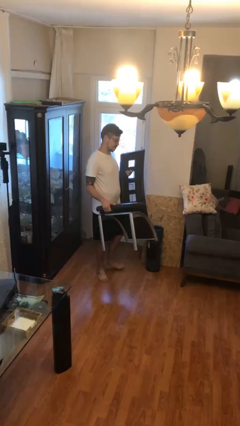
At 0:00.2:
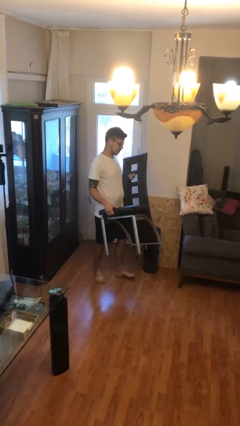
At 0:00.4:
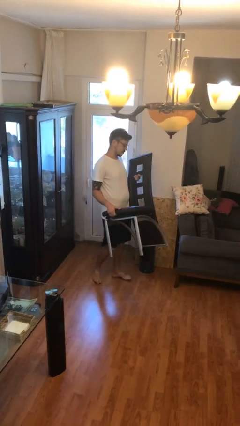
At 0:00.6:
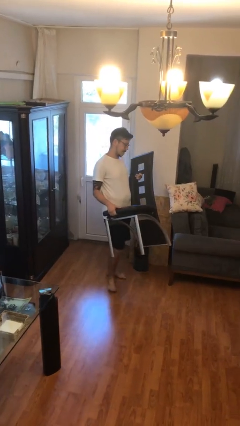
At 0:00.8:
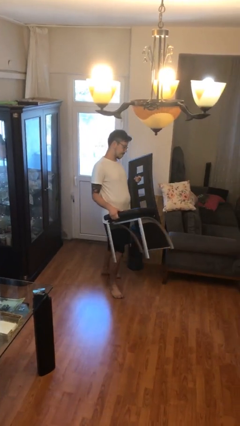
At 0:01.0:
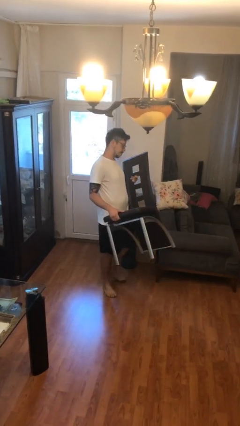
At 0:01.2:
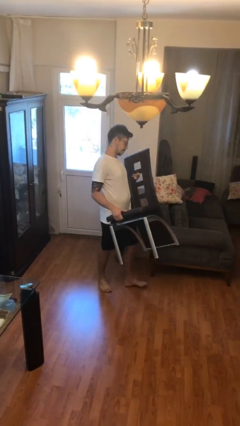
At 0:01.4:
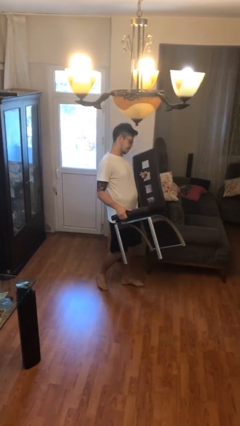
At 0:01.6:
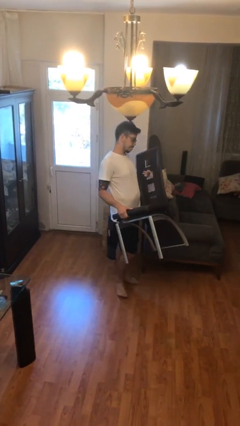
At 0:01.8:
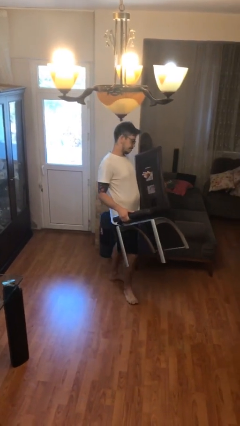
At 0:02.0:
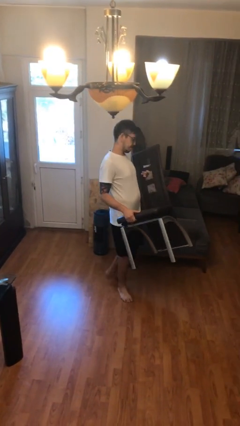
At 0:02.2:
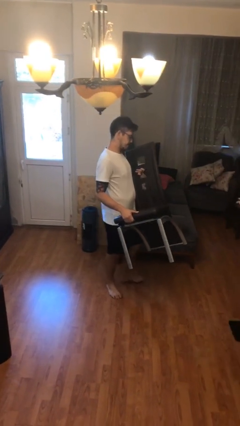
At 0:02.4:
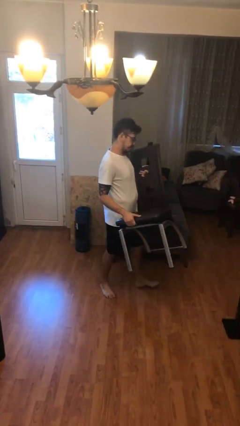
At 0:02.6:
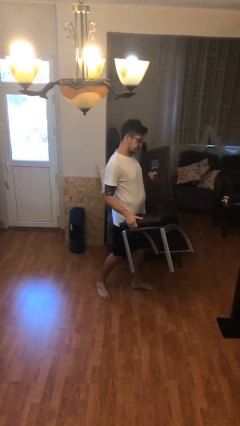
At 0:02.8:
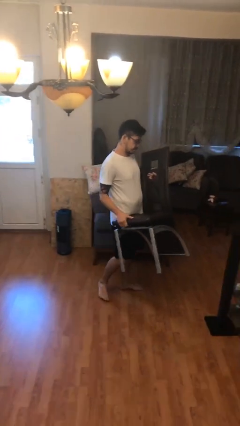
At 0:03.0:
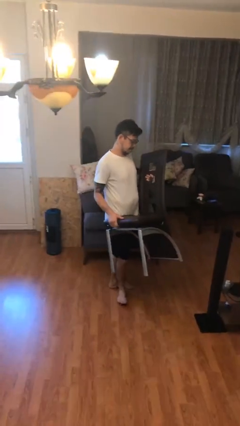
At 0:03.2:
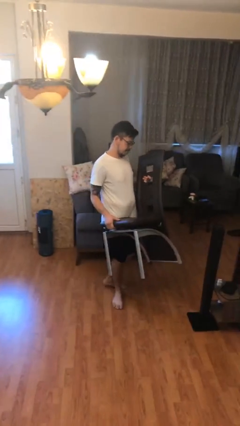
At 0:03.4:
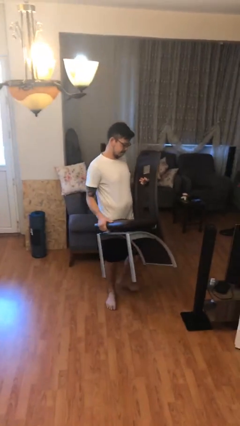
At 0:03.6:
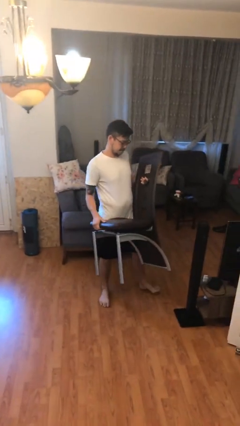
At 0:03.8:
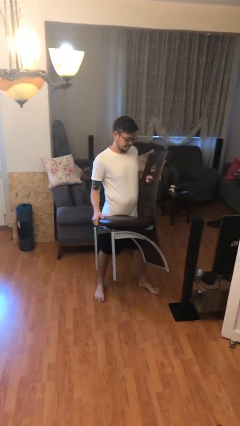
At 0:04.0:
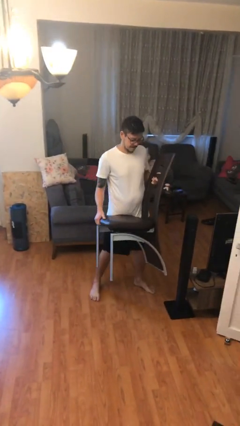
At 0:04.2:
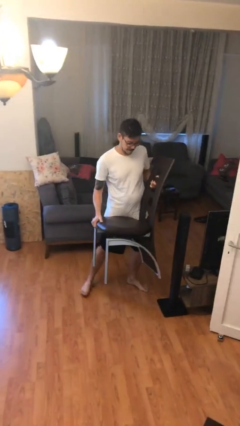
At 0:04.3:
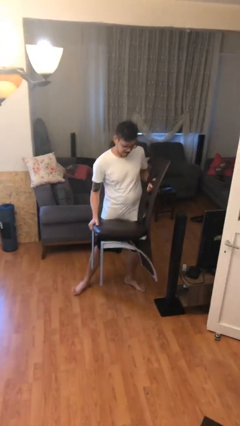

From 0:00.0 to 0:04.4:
person carries heavy object

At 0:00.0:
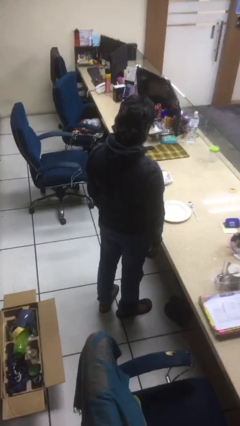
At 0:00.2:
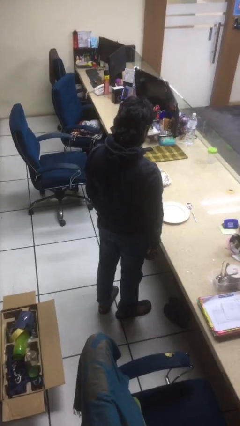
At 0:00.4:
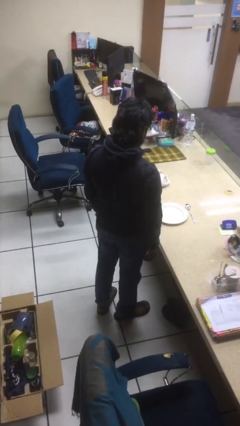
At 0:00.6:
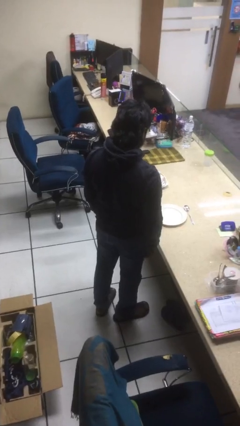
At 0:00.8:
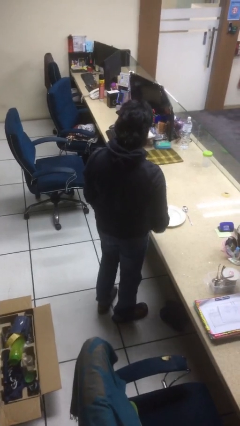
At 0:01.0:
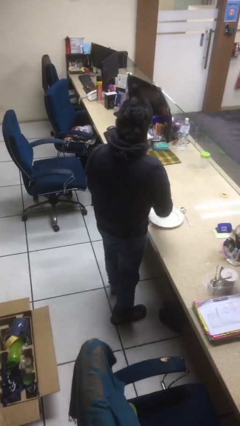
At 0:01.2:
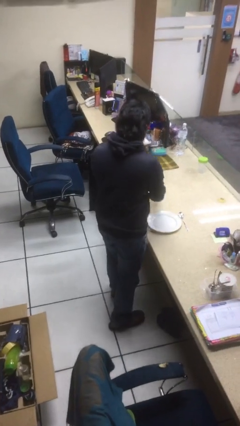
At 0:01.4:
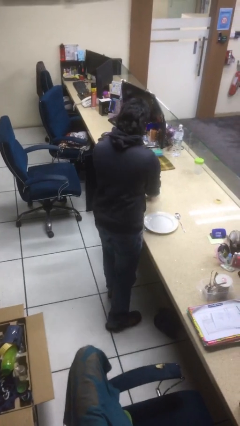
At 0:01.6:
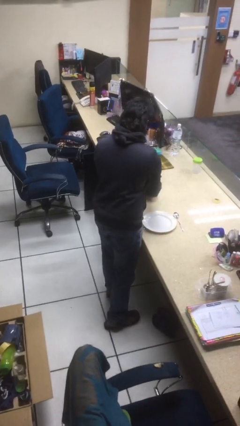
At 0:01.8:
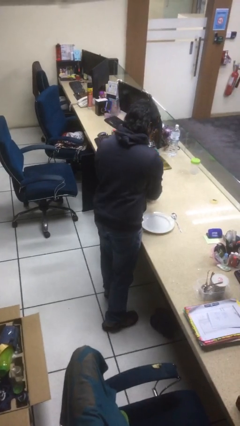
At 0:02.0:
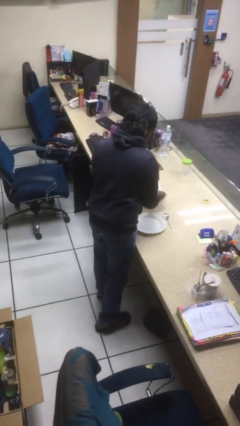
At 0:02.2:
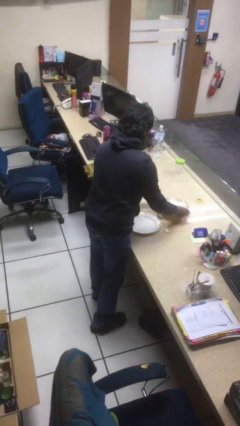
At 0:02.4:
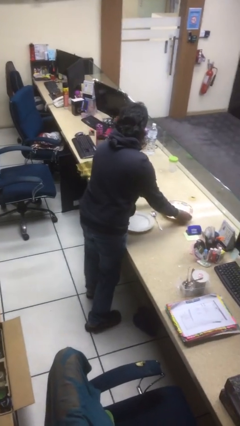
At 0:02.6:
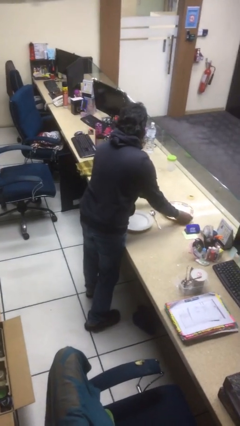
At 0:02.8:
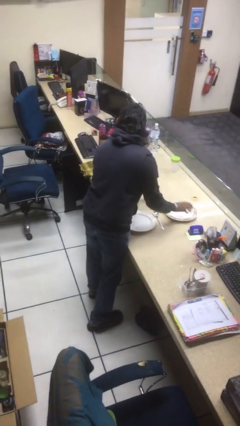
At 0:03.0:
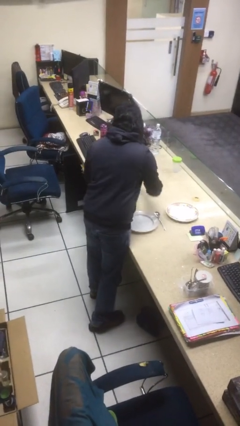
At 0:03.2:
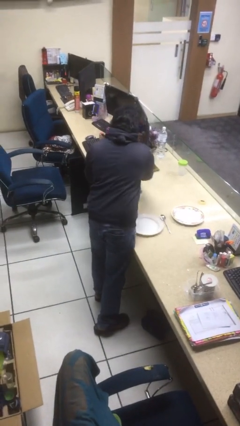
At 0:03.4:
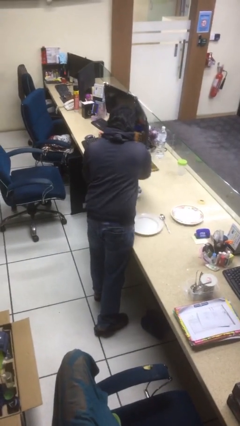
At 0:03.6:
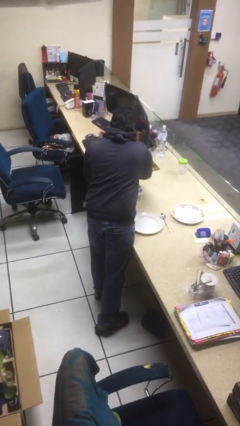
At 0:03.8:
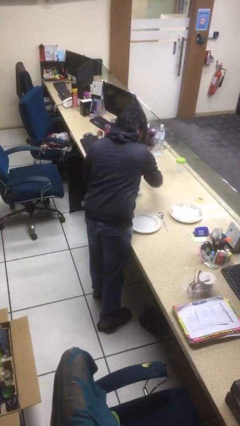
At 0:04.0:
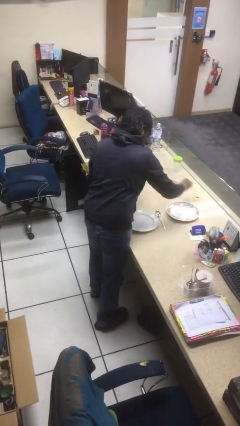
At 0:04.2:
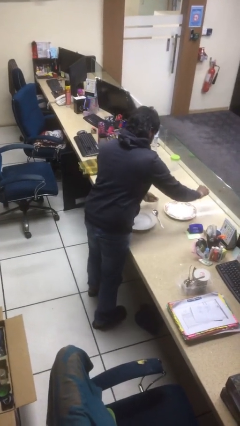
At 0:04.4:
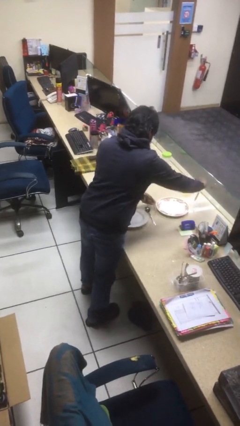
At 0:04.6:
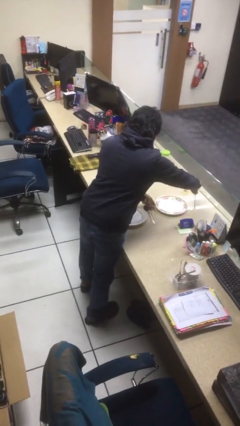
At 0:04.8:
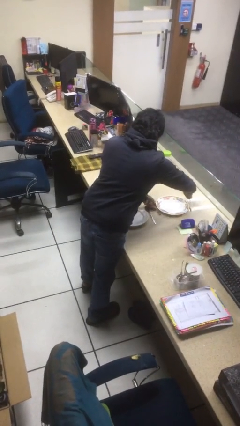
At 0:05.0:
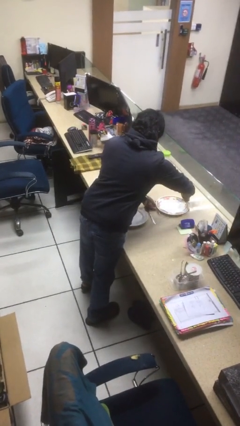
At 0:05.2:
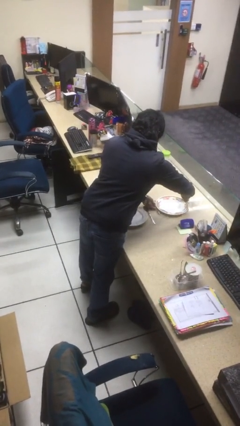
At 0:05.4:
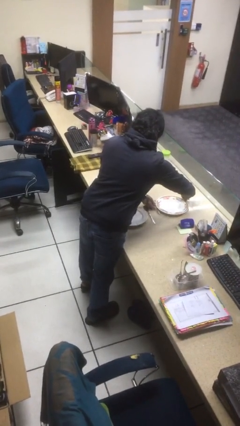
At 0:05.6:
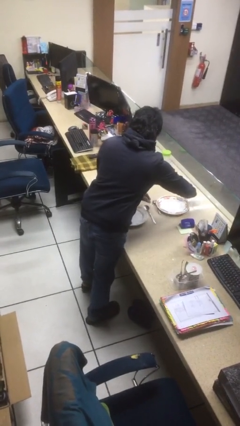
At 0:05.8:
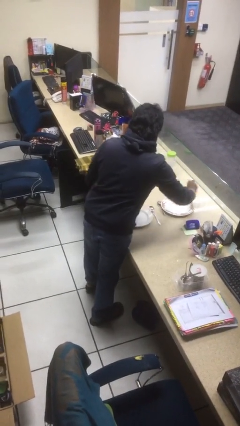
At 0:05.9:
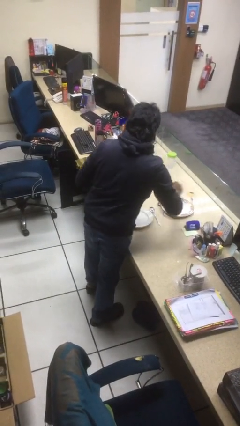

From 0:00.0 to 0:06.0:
person sets table

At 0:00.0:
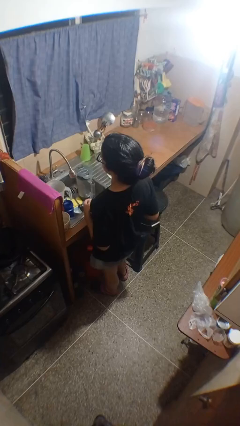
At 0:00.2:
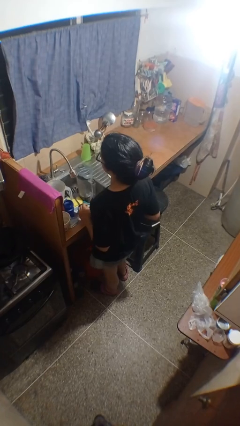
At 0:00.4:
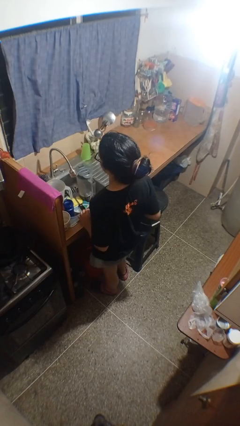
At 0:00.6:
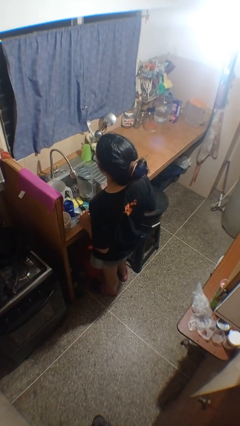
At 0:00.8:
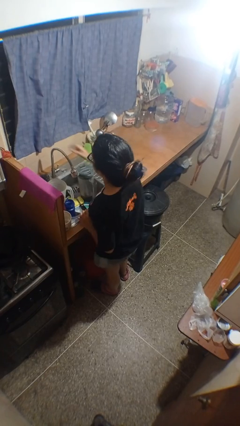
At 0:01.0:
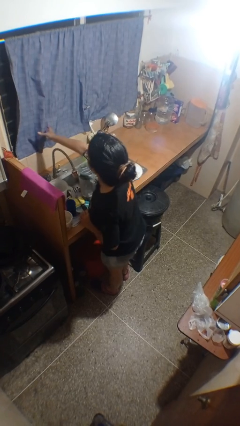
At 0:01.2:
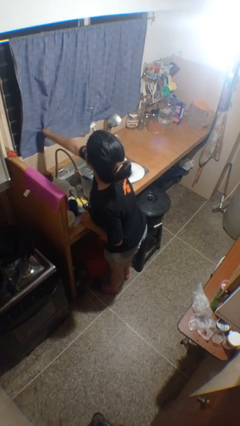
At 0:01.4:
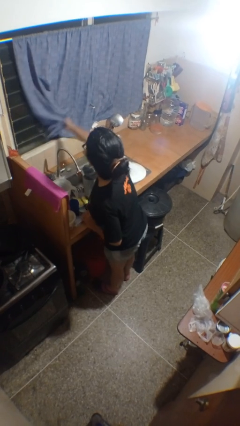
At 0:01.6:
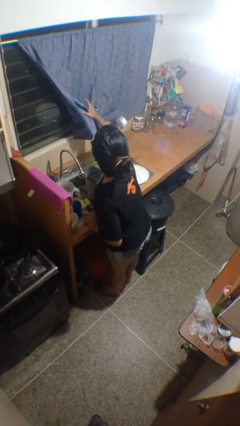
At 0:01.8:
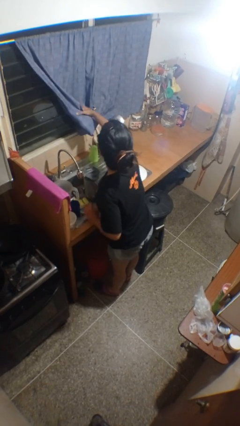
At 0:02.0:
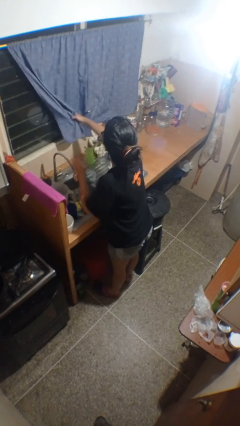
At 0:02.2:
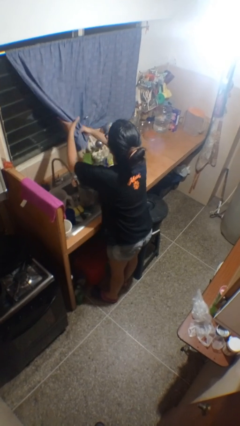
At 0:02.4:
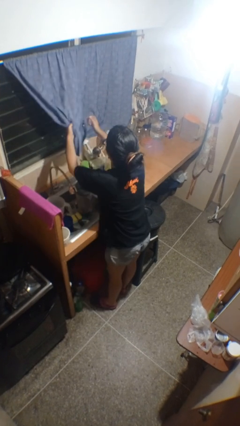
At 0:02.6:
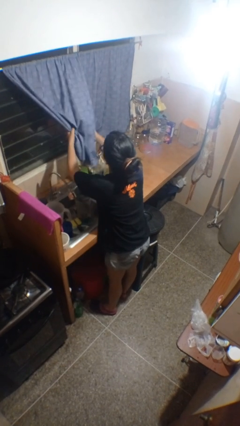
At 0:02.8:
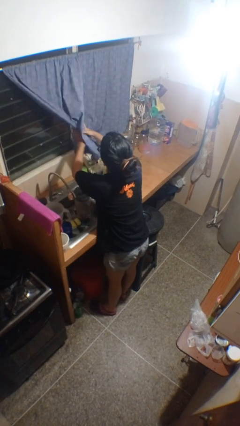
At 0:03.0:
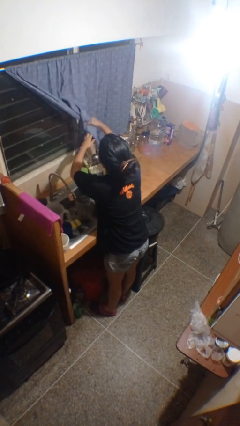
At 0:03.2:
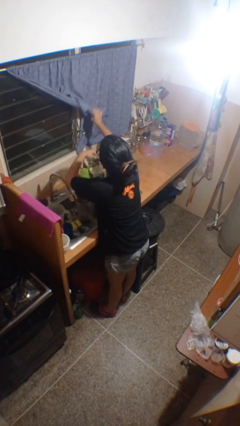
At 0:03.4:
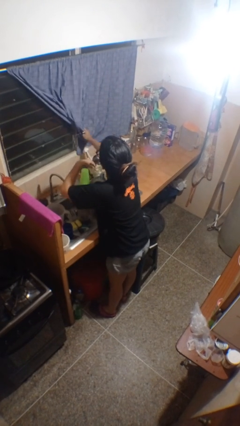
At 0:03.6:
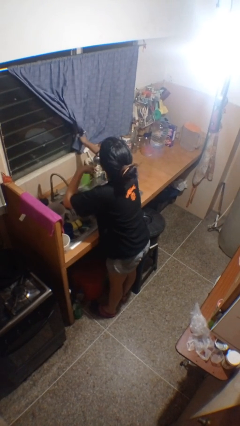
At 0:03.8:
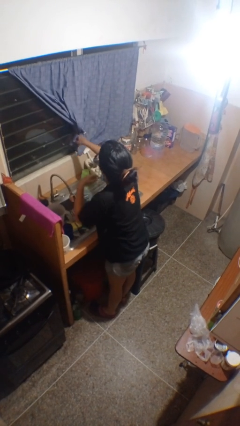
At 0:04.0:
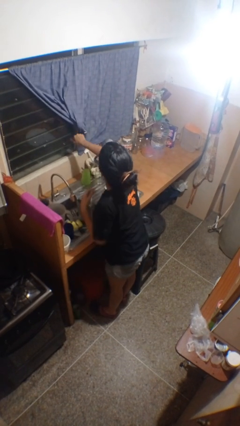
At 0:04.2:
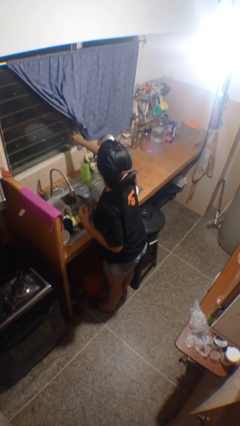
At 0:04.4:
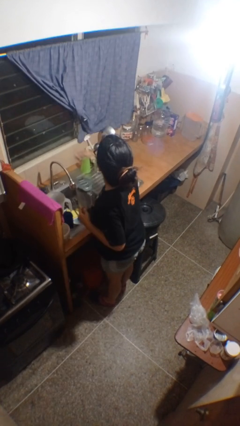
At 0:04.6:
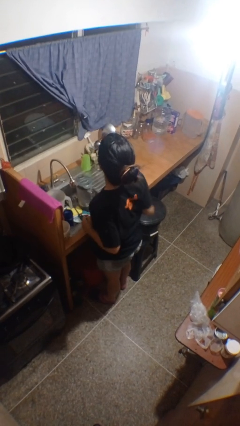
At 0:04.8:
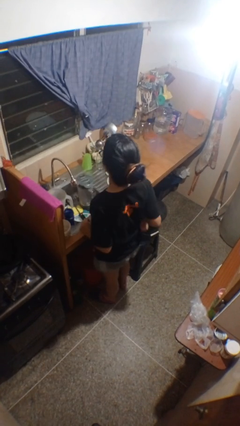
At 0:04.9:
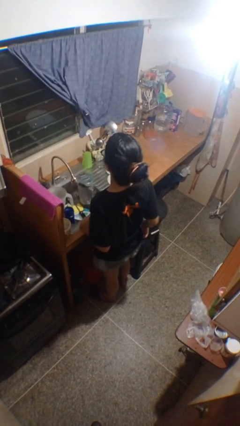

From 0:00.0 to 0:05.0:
person opens curtains

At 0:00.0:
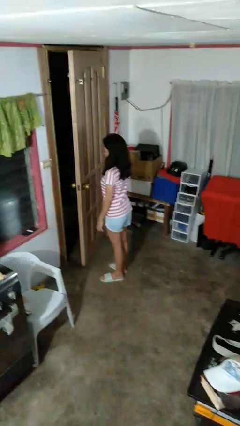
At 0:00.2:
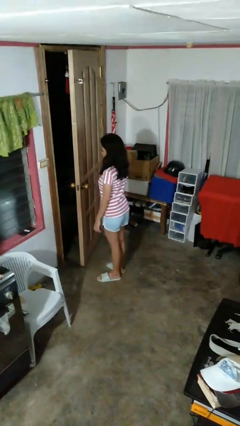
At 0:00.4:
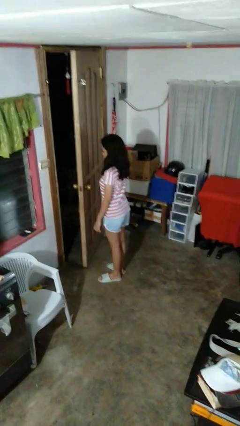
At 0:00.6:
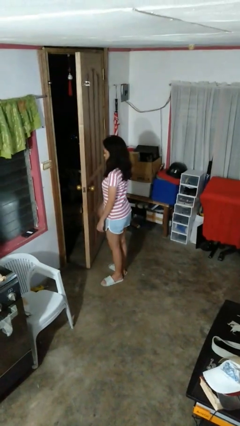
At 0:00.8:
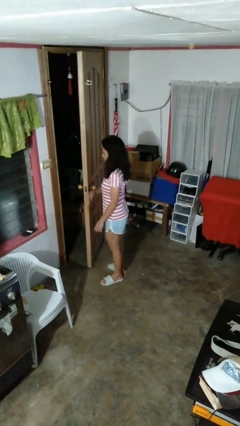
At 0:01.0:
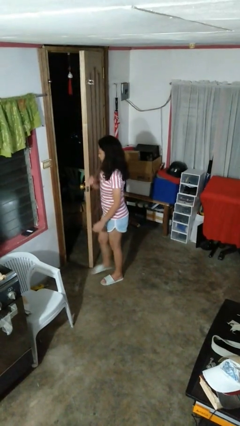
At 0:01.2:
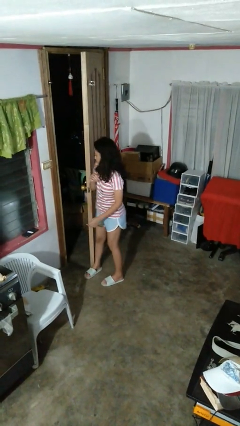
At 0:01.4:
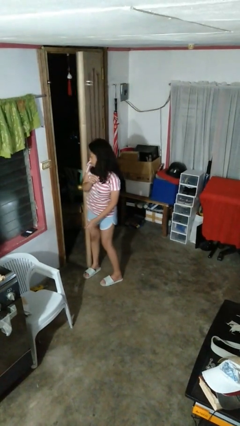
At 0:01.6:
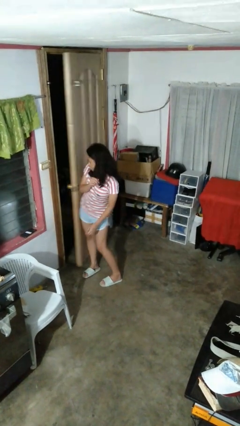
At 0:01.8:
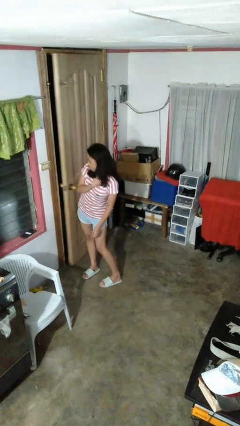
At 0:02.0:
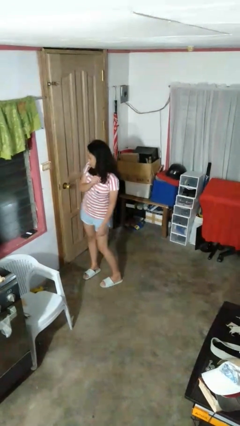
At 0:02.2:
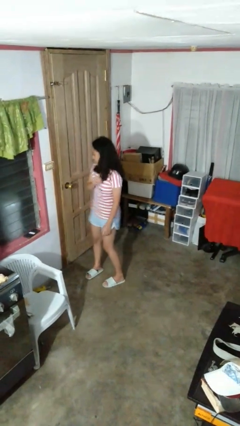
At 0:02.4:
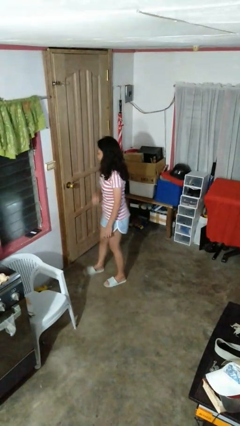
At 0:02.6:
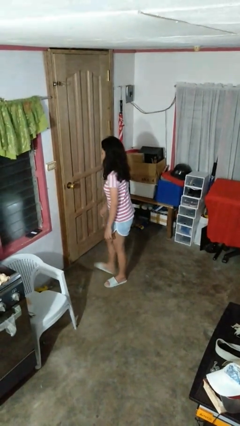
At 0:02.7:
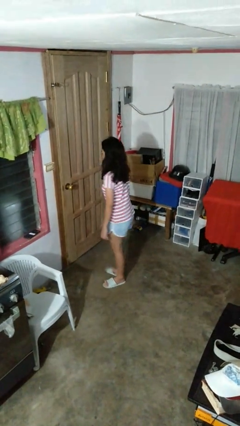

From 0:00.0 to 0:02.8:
person closes door with hip
